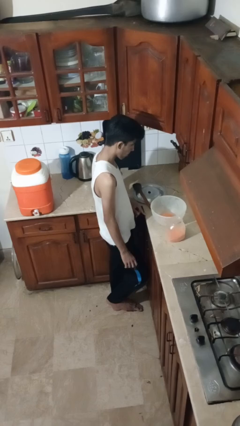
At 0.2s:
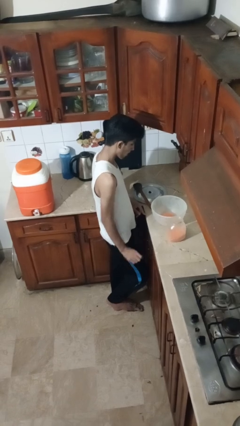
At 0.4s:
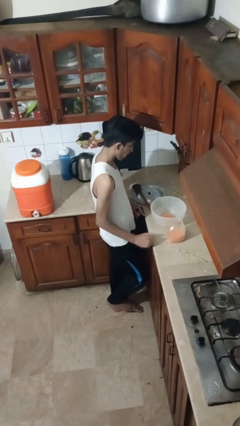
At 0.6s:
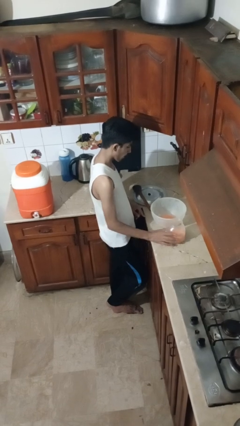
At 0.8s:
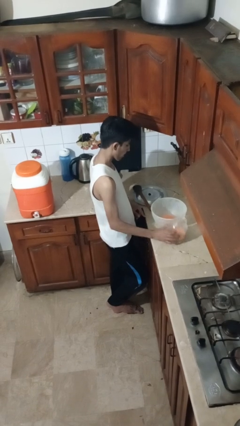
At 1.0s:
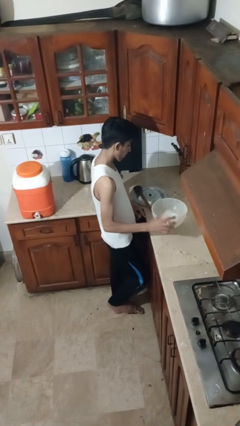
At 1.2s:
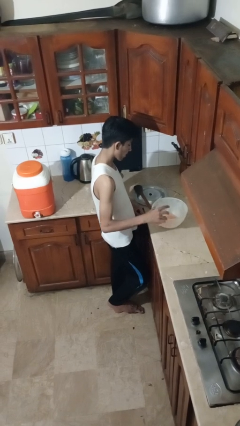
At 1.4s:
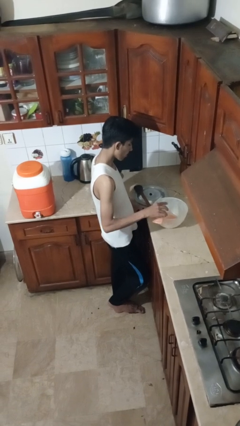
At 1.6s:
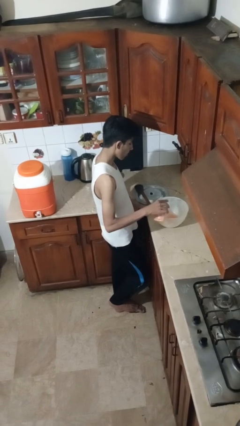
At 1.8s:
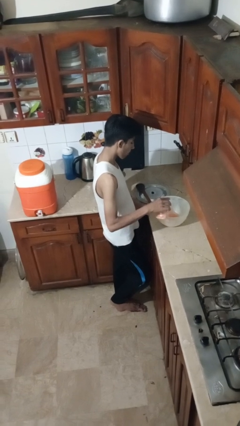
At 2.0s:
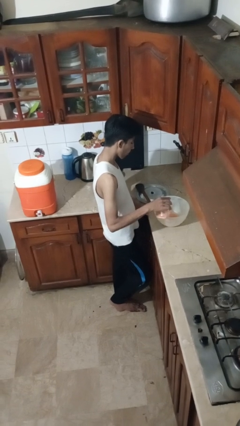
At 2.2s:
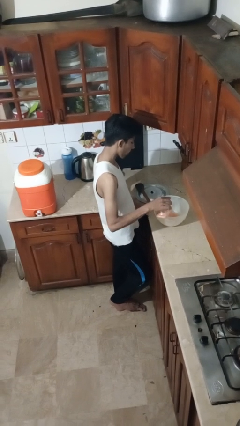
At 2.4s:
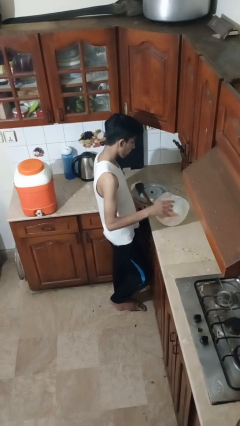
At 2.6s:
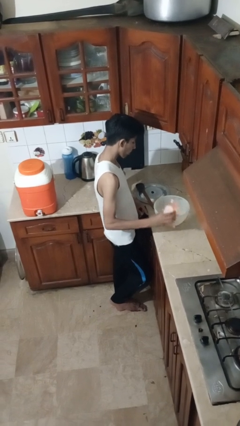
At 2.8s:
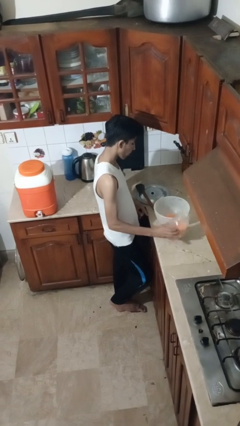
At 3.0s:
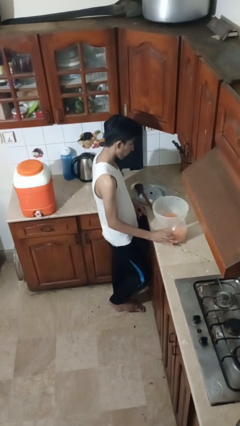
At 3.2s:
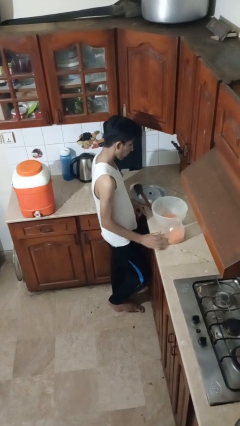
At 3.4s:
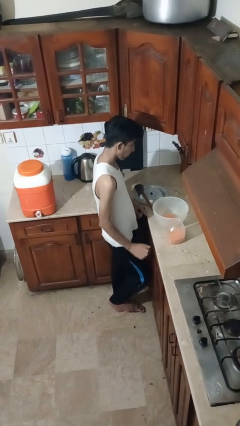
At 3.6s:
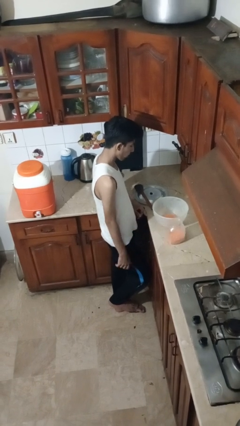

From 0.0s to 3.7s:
person pours into bowl

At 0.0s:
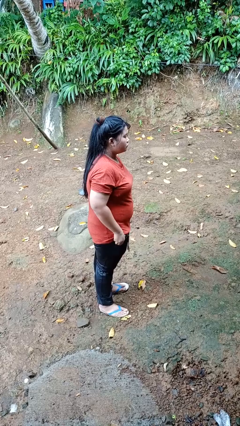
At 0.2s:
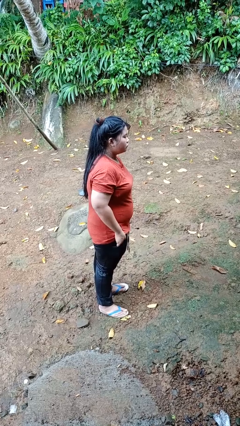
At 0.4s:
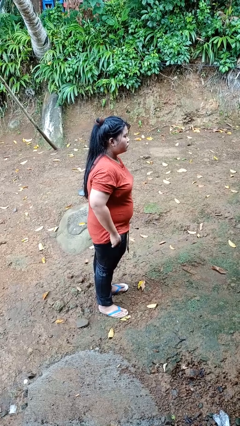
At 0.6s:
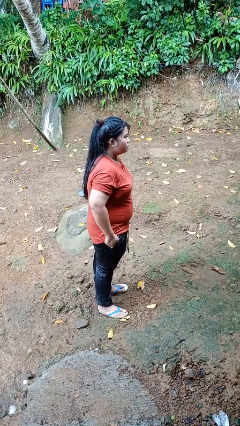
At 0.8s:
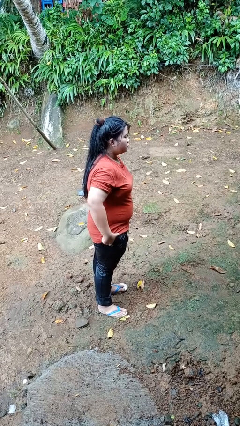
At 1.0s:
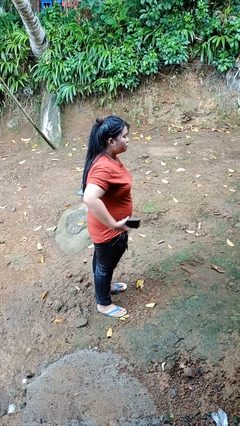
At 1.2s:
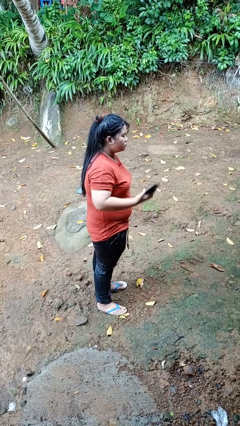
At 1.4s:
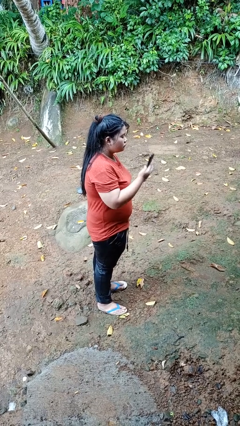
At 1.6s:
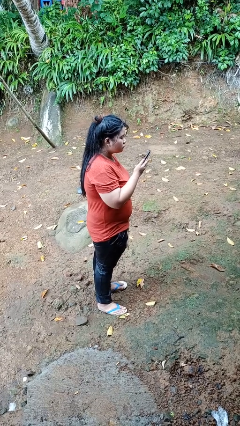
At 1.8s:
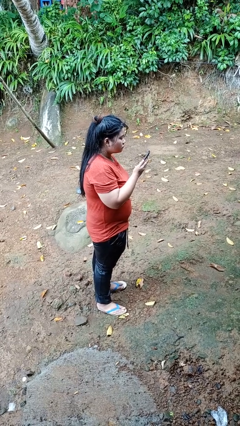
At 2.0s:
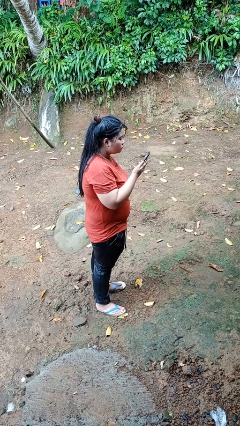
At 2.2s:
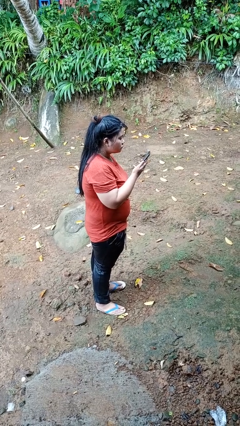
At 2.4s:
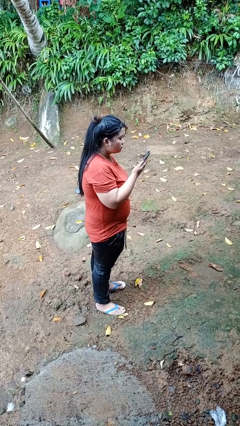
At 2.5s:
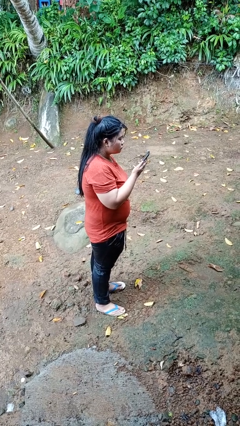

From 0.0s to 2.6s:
person takes phone from pocket

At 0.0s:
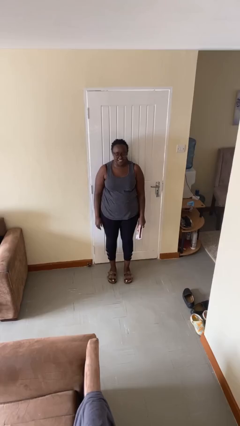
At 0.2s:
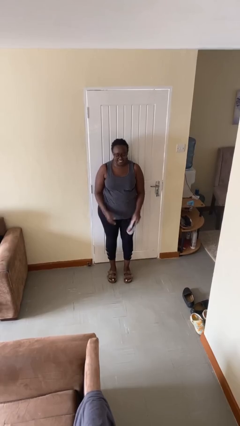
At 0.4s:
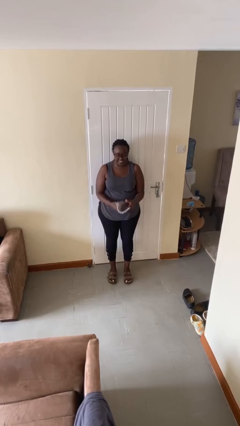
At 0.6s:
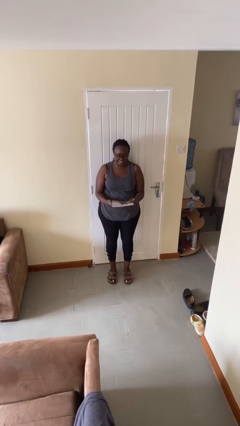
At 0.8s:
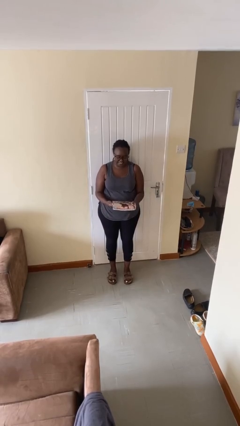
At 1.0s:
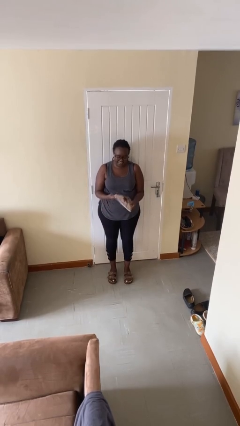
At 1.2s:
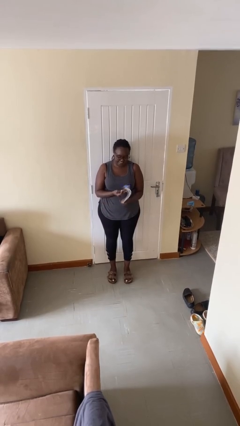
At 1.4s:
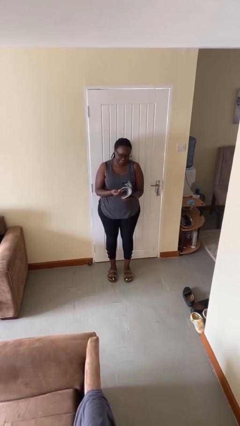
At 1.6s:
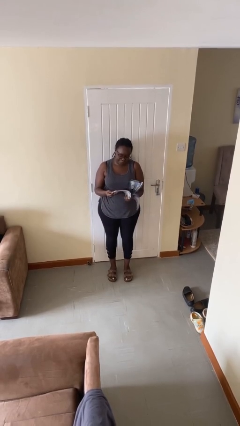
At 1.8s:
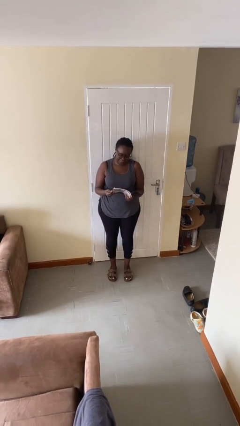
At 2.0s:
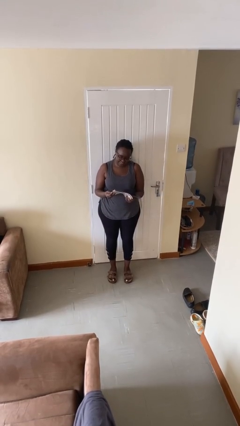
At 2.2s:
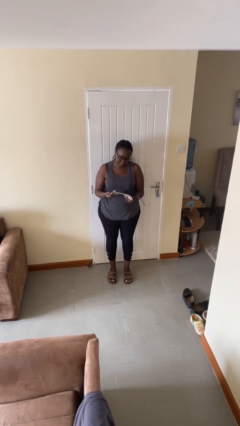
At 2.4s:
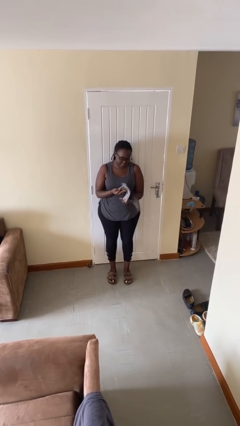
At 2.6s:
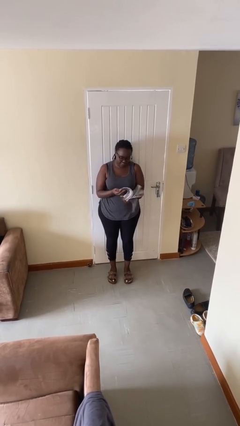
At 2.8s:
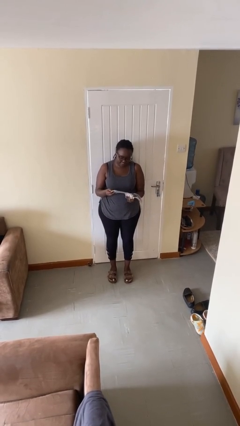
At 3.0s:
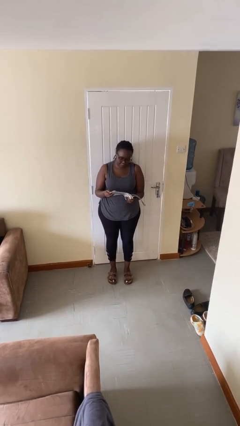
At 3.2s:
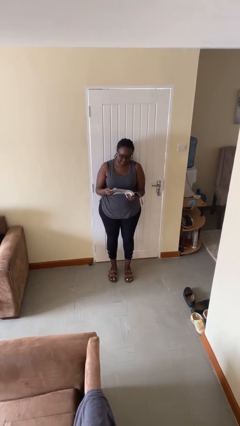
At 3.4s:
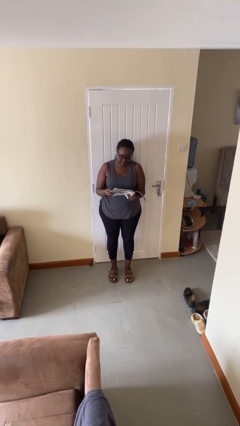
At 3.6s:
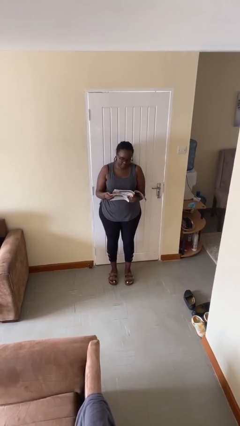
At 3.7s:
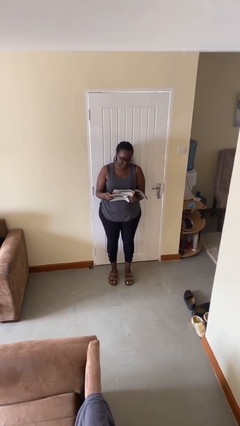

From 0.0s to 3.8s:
person reads magazine

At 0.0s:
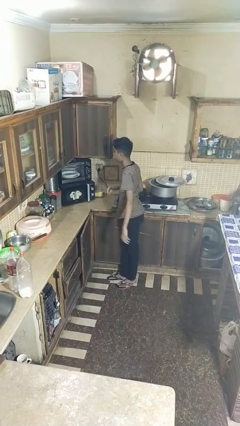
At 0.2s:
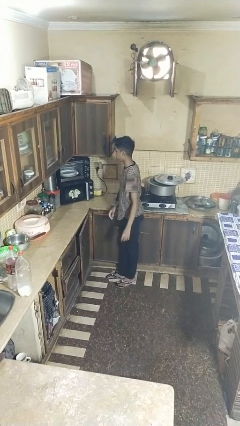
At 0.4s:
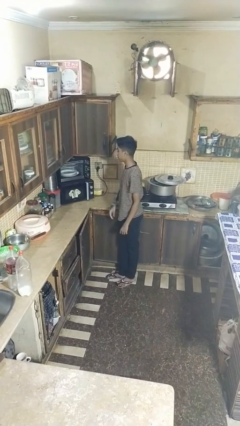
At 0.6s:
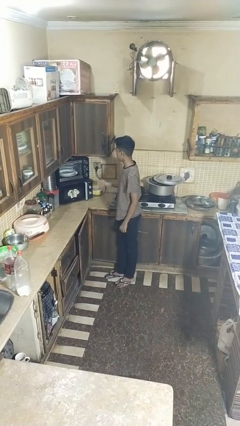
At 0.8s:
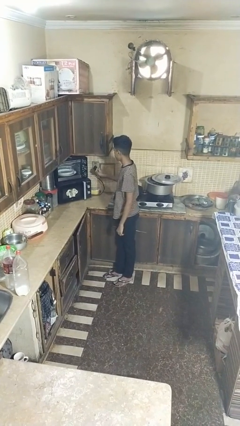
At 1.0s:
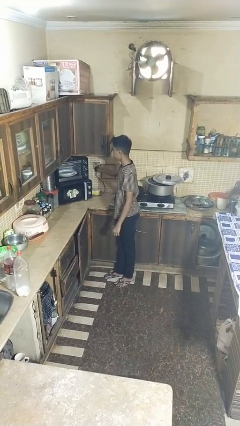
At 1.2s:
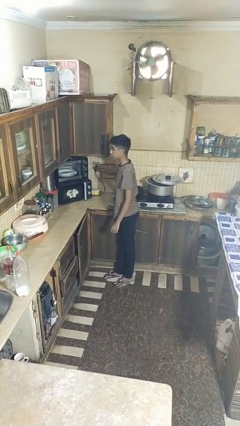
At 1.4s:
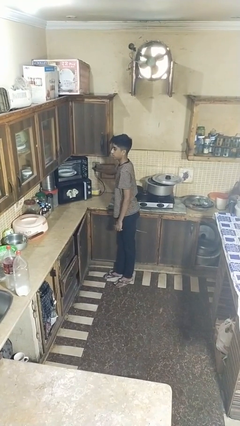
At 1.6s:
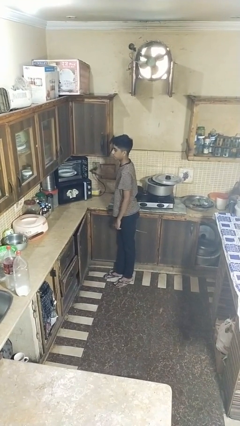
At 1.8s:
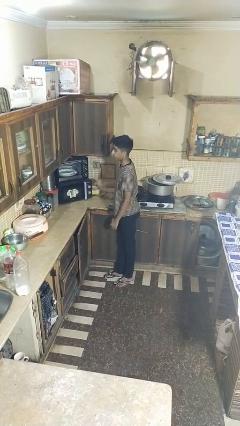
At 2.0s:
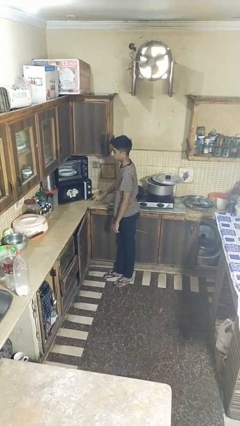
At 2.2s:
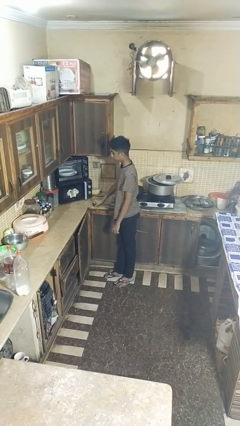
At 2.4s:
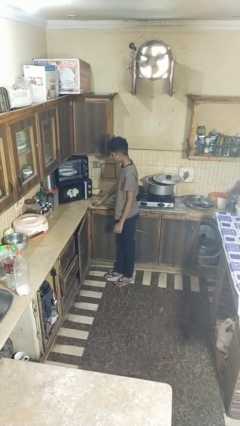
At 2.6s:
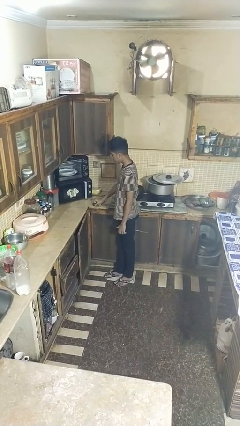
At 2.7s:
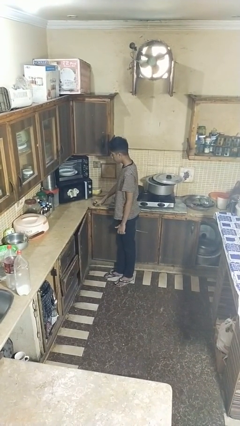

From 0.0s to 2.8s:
person unplugs from electrical socket

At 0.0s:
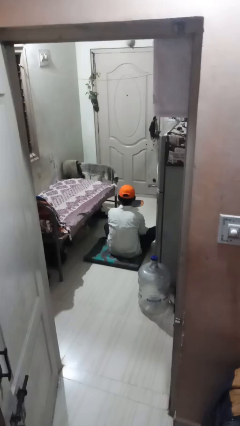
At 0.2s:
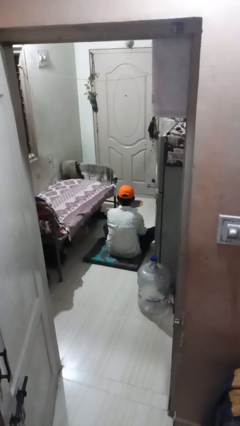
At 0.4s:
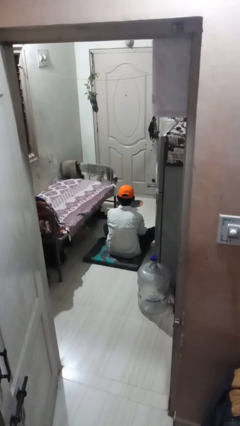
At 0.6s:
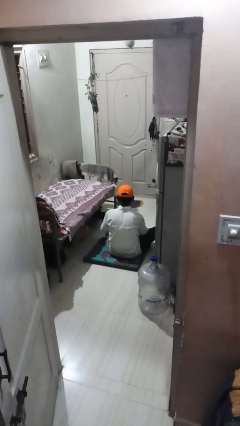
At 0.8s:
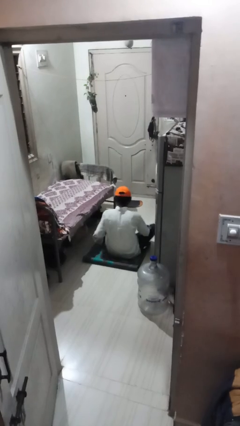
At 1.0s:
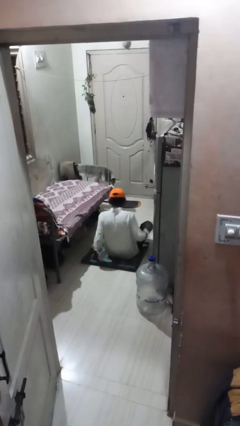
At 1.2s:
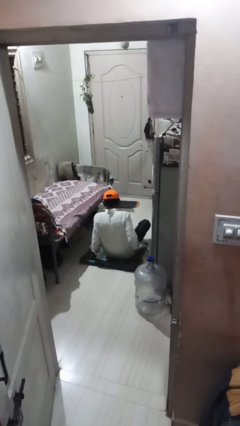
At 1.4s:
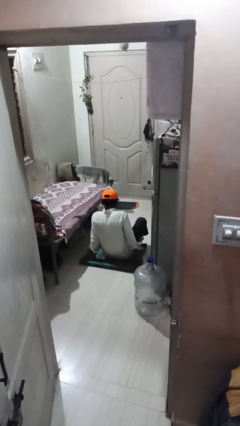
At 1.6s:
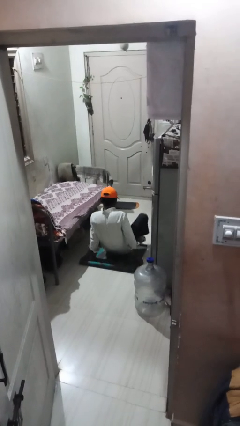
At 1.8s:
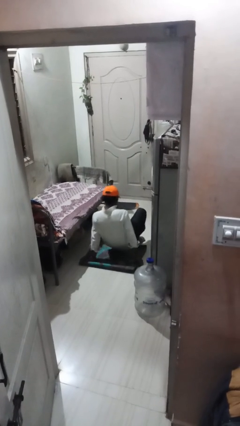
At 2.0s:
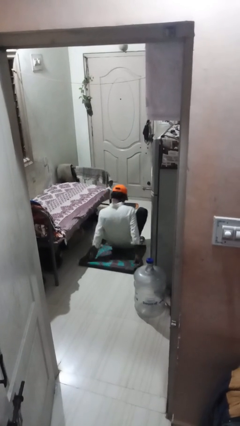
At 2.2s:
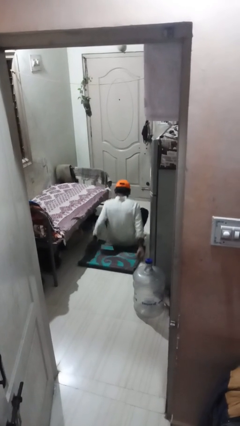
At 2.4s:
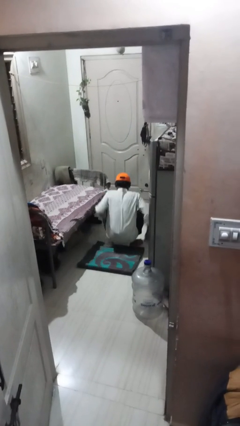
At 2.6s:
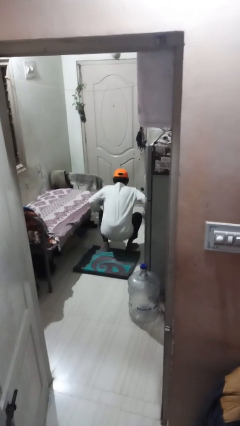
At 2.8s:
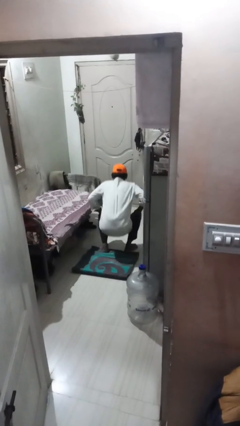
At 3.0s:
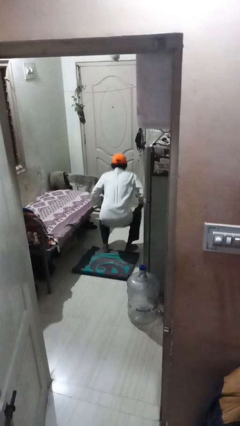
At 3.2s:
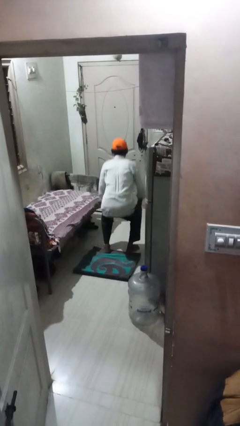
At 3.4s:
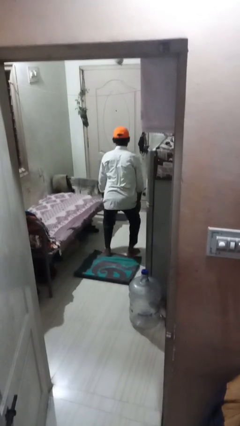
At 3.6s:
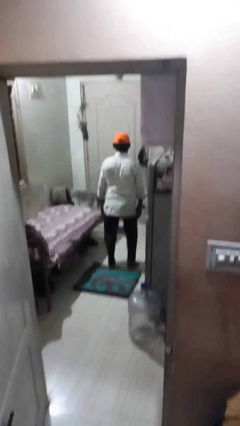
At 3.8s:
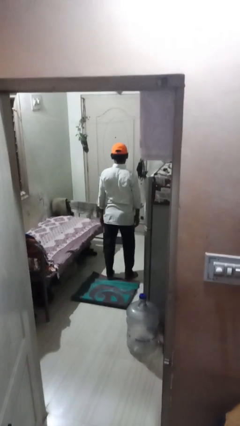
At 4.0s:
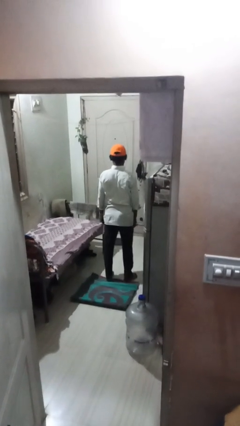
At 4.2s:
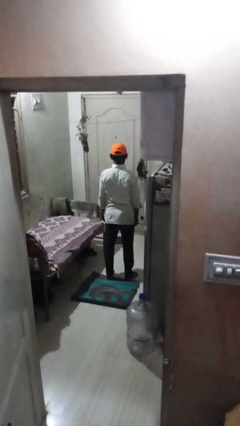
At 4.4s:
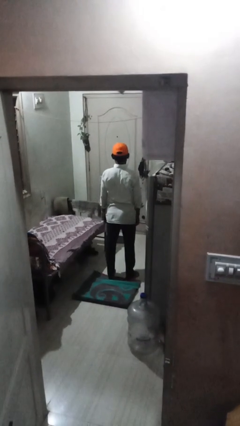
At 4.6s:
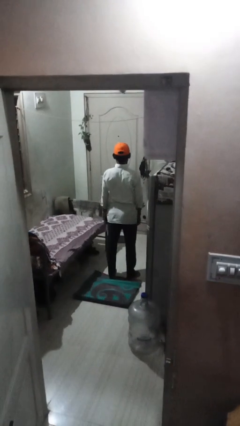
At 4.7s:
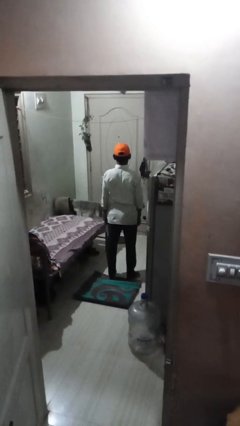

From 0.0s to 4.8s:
person stands up from floor

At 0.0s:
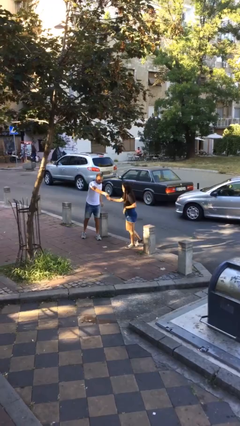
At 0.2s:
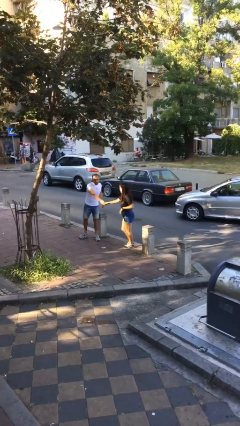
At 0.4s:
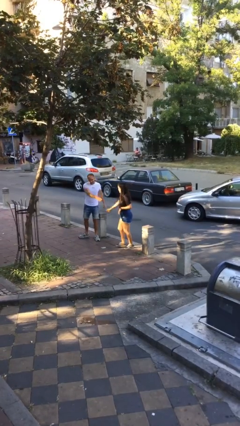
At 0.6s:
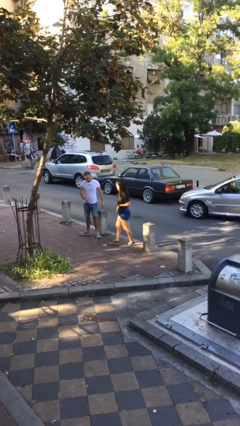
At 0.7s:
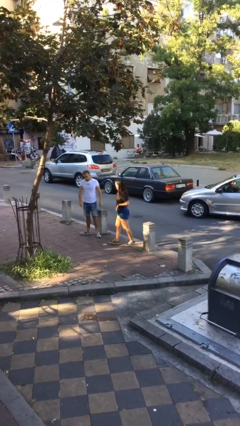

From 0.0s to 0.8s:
person shakes hand
